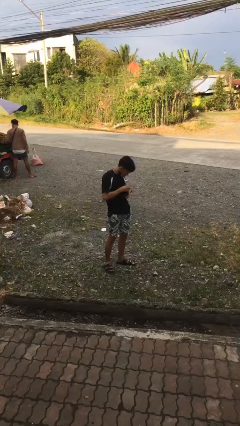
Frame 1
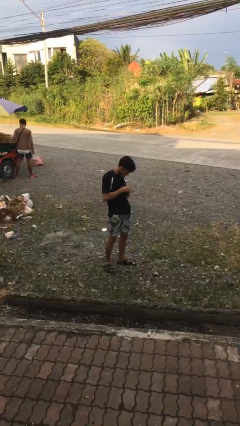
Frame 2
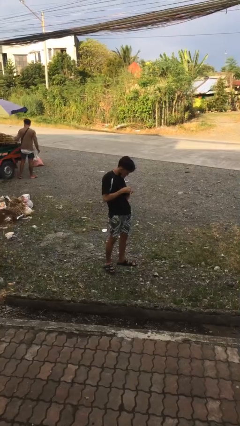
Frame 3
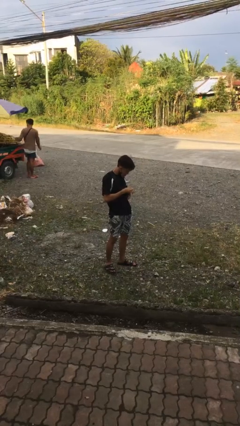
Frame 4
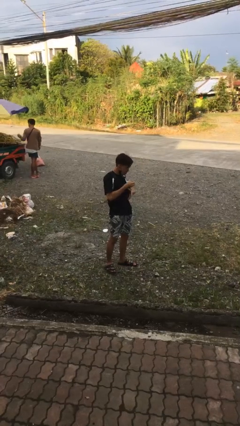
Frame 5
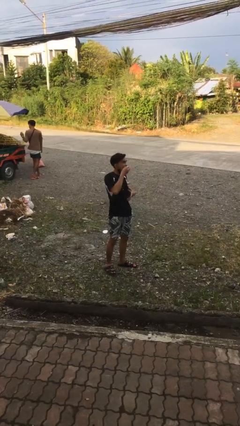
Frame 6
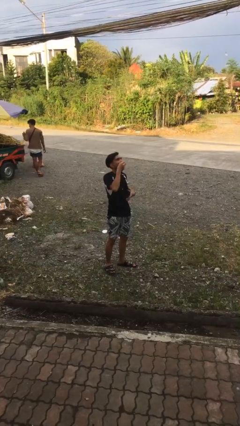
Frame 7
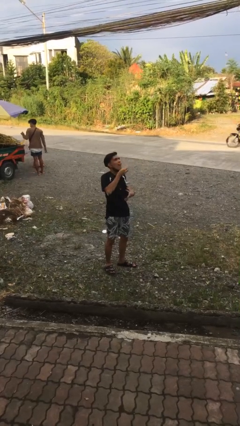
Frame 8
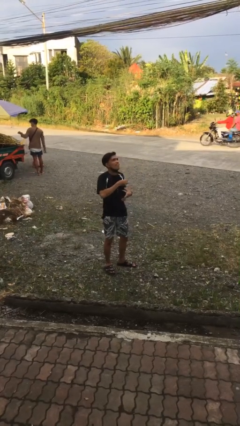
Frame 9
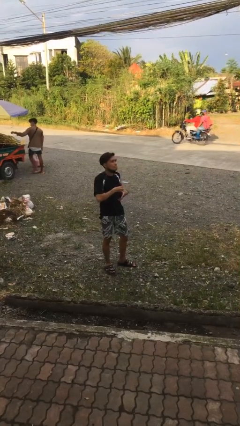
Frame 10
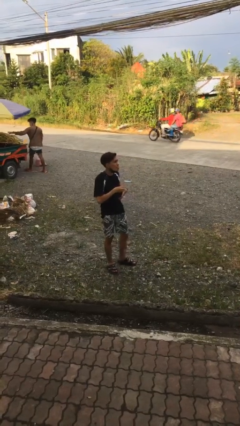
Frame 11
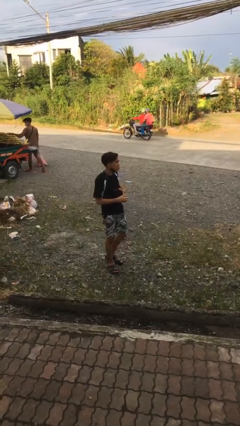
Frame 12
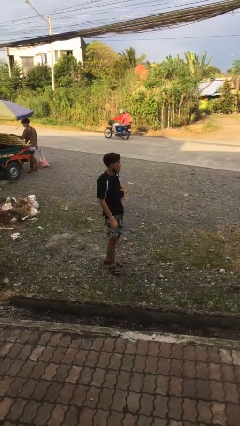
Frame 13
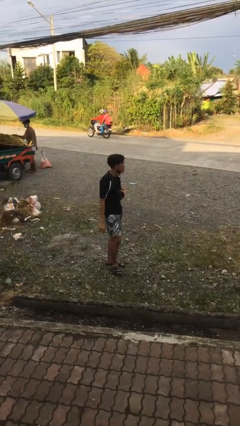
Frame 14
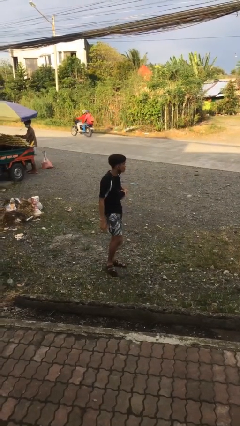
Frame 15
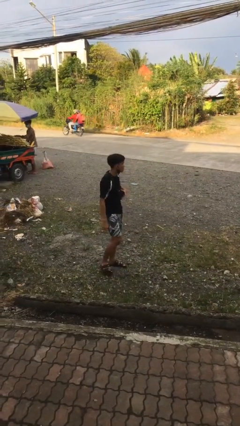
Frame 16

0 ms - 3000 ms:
person eats snack from bag

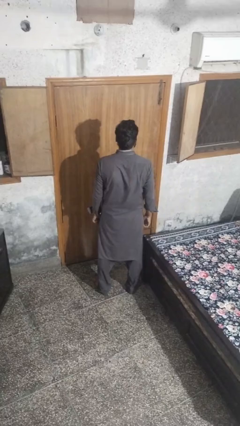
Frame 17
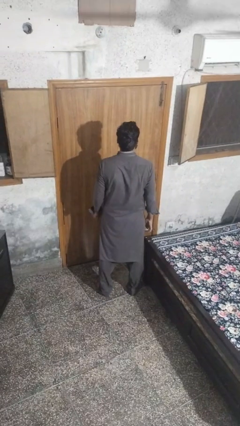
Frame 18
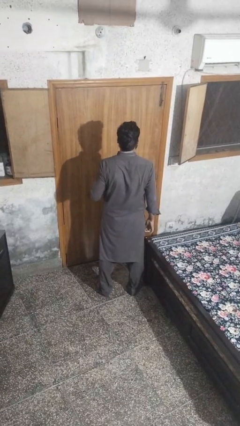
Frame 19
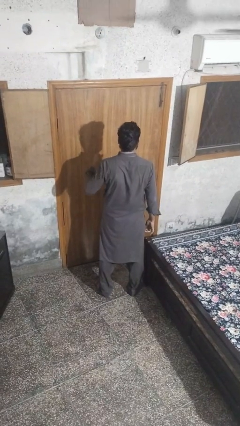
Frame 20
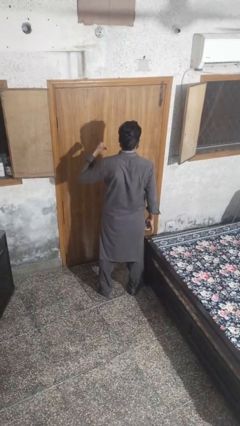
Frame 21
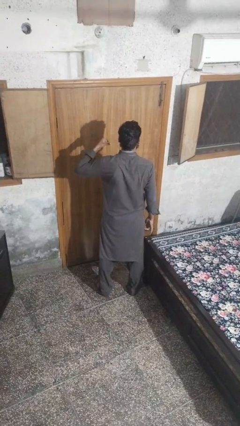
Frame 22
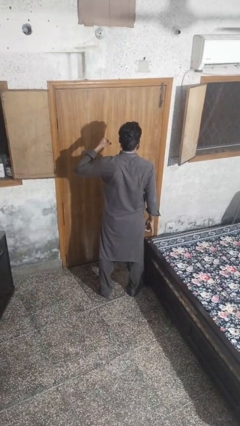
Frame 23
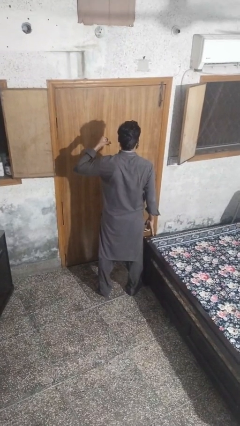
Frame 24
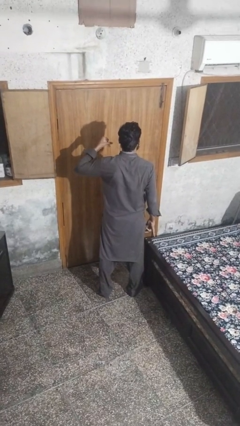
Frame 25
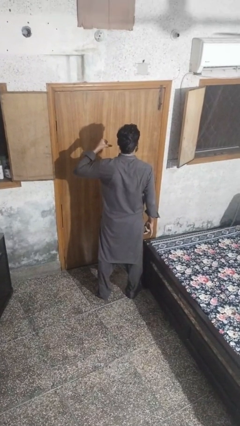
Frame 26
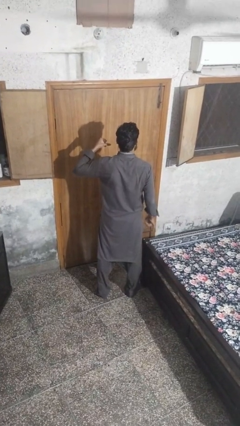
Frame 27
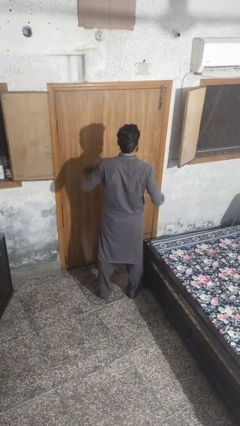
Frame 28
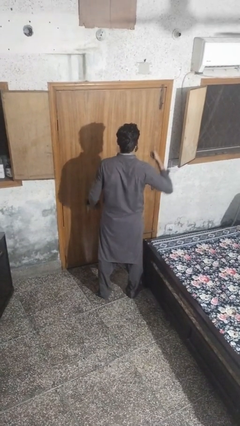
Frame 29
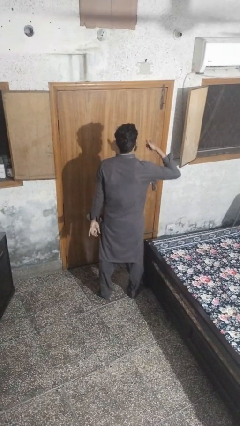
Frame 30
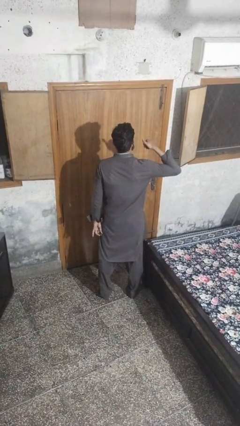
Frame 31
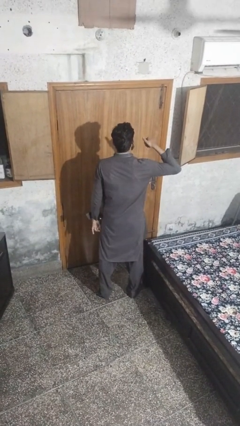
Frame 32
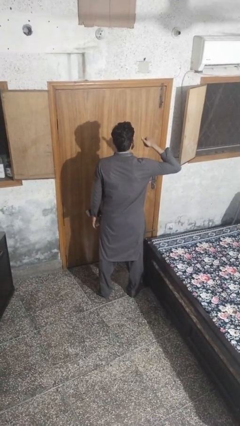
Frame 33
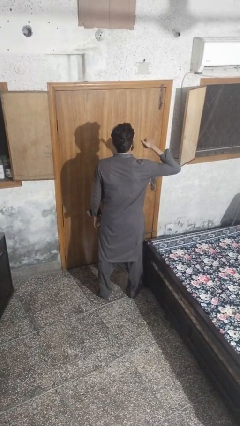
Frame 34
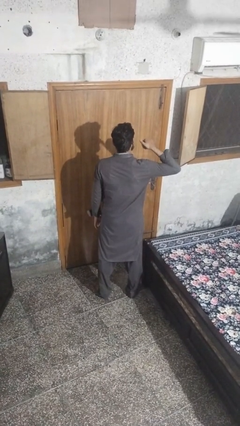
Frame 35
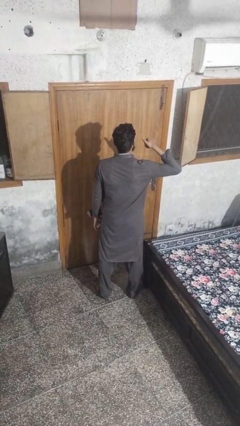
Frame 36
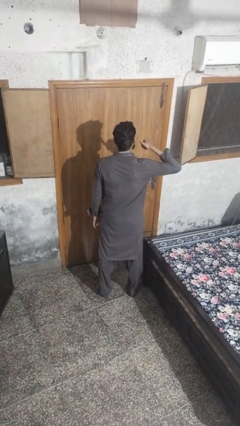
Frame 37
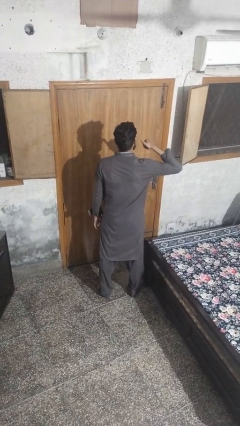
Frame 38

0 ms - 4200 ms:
person gestures call me

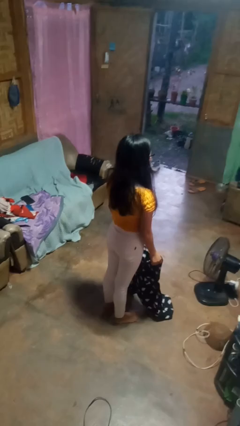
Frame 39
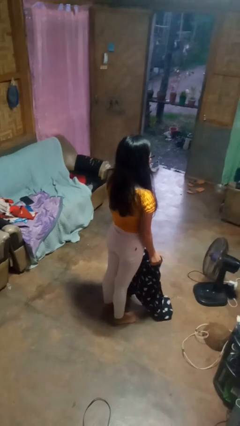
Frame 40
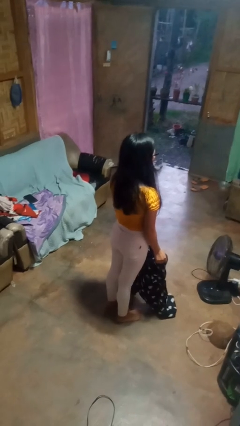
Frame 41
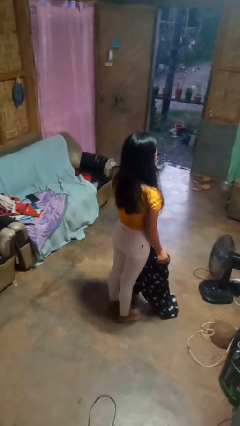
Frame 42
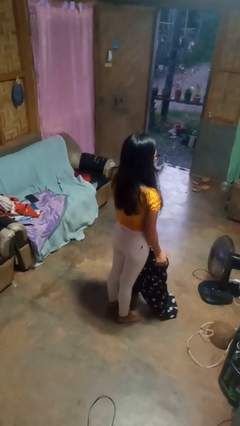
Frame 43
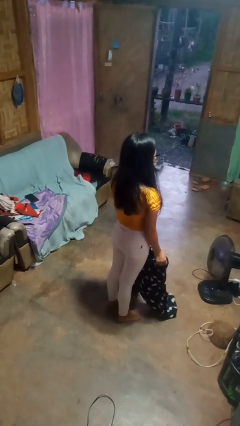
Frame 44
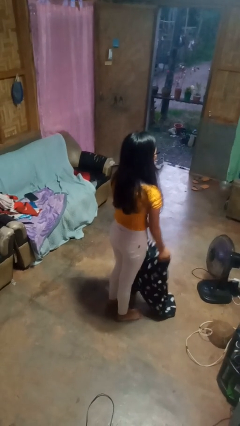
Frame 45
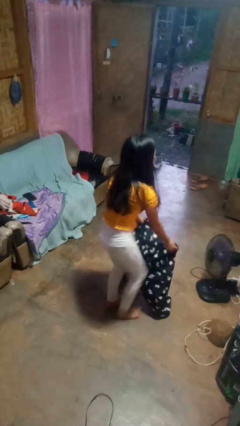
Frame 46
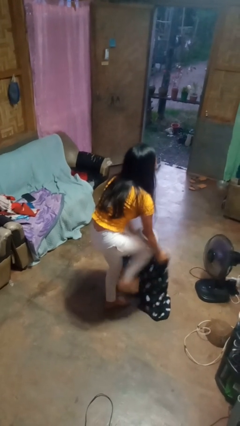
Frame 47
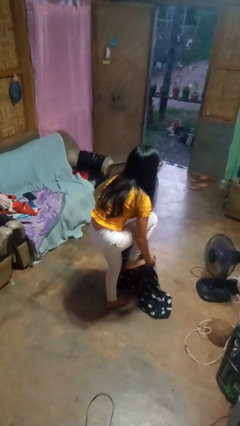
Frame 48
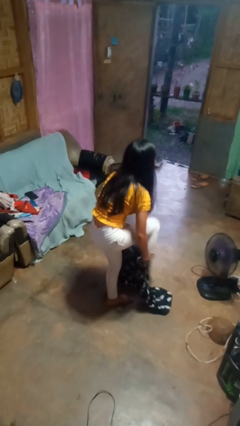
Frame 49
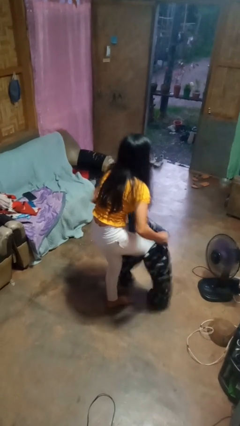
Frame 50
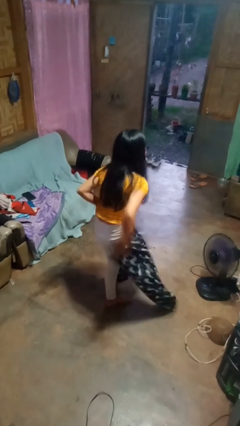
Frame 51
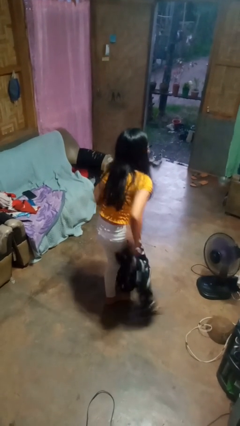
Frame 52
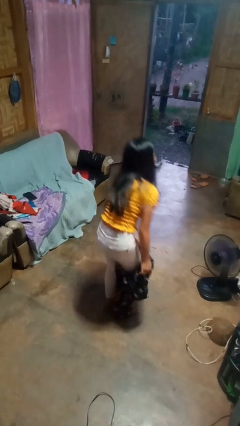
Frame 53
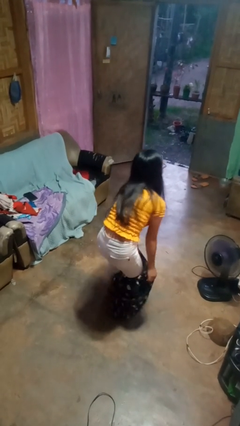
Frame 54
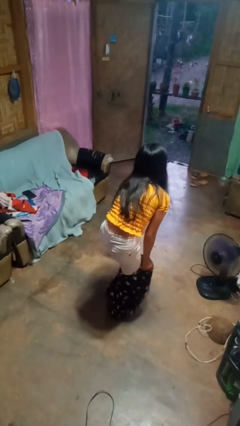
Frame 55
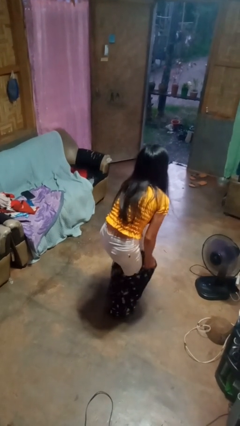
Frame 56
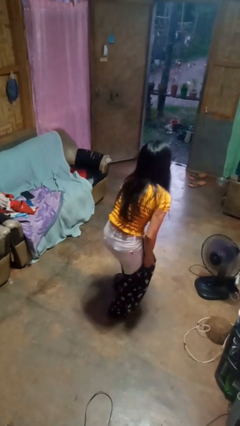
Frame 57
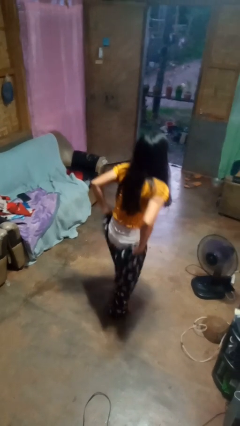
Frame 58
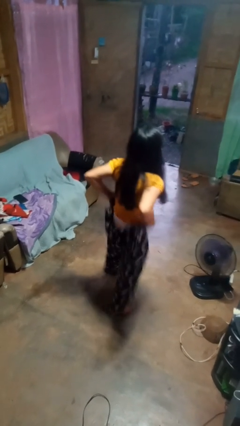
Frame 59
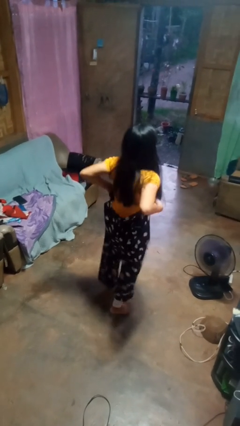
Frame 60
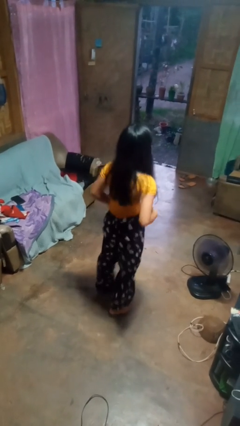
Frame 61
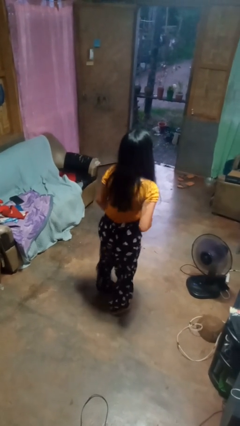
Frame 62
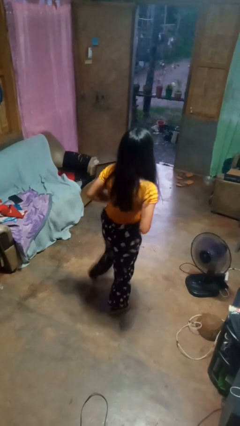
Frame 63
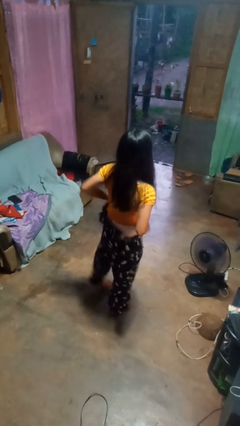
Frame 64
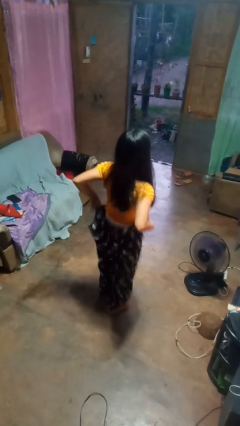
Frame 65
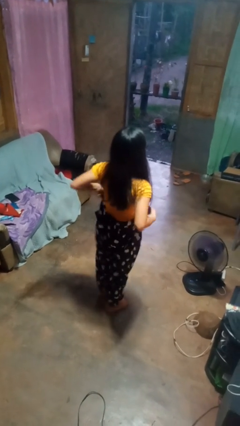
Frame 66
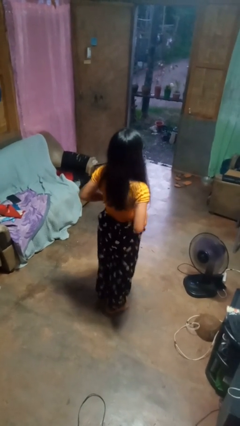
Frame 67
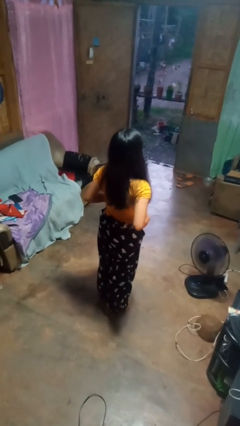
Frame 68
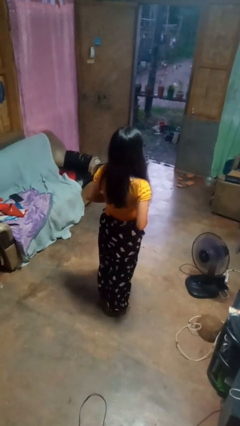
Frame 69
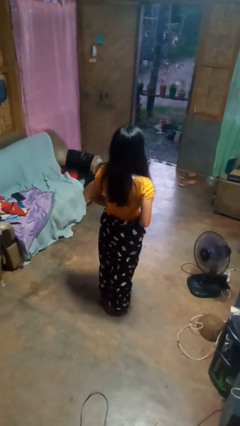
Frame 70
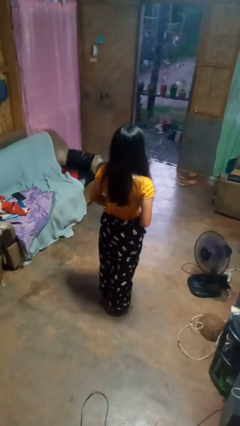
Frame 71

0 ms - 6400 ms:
person puts on pants

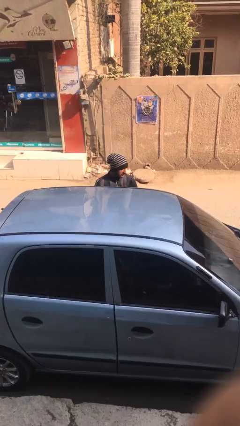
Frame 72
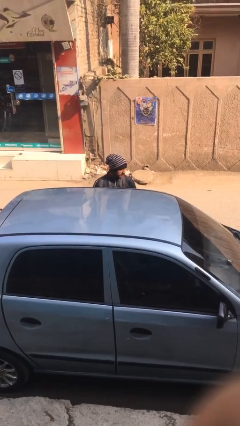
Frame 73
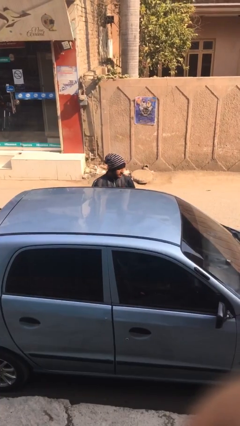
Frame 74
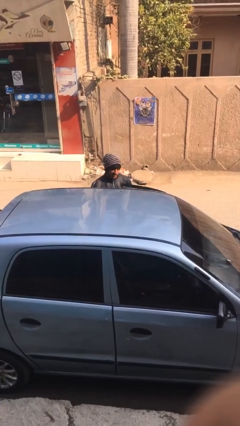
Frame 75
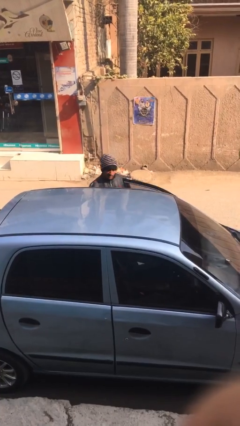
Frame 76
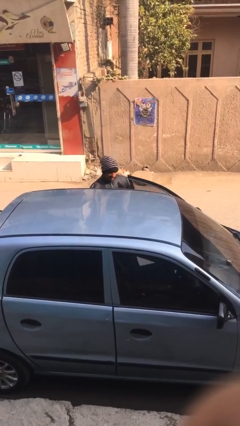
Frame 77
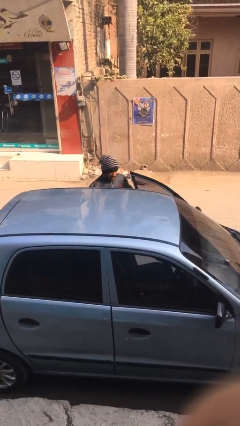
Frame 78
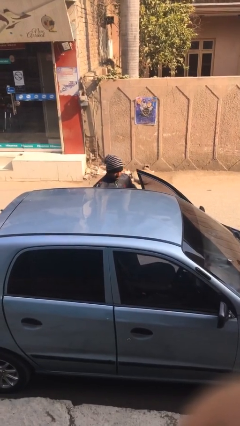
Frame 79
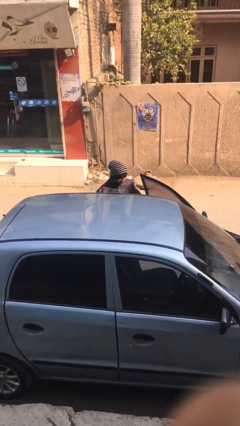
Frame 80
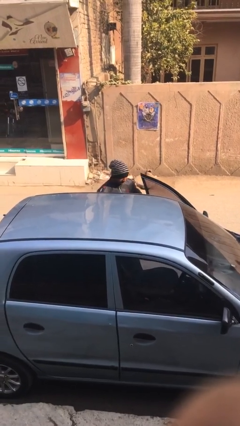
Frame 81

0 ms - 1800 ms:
person opens car door

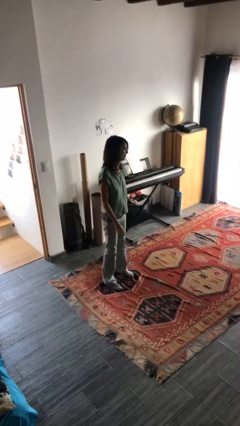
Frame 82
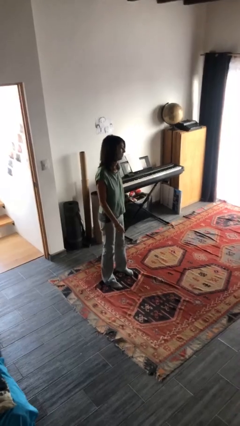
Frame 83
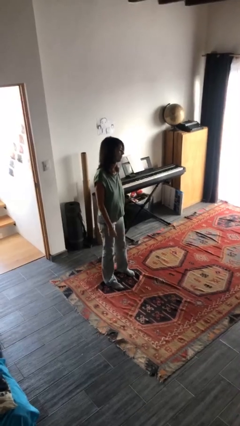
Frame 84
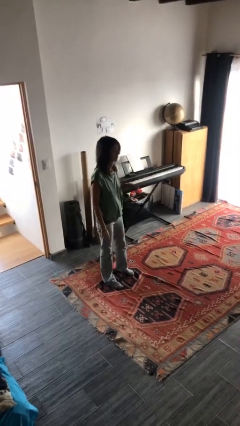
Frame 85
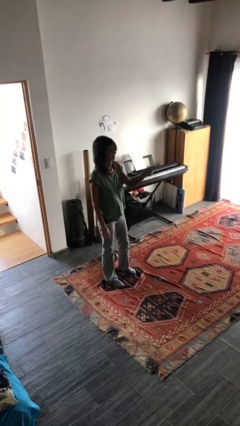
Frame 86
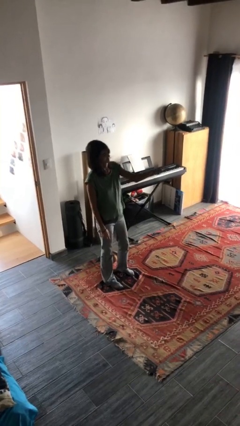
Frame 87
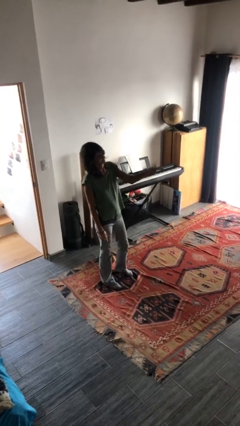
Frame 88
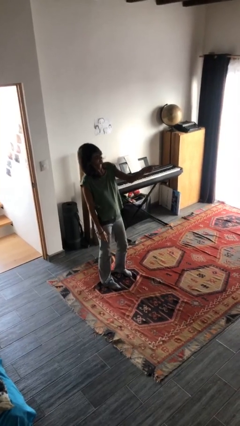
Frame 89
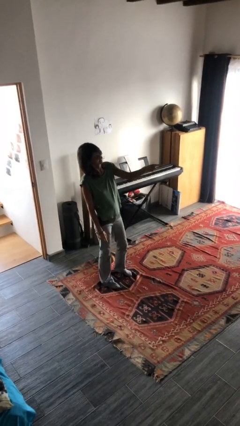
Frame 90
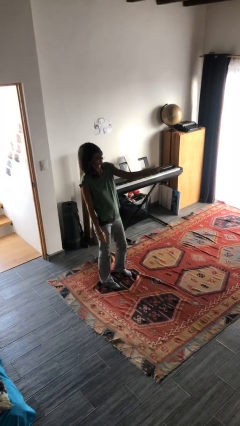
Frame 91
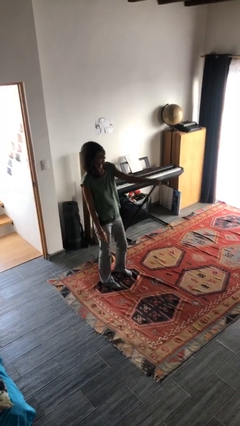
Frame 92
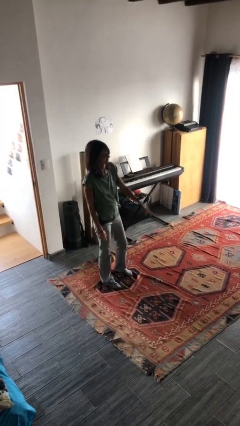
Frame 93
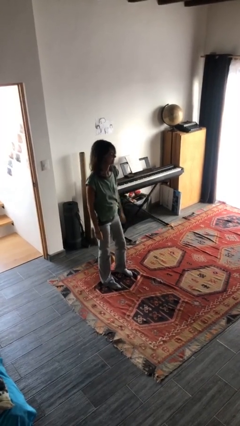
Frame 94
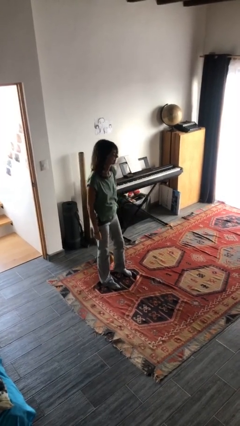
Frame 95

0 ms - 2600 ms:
person points at person

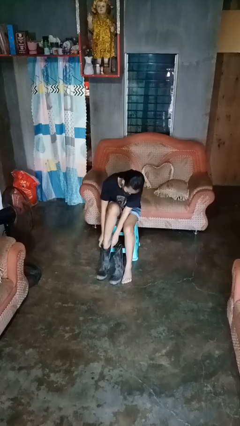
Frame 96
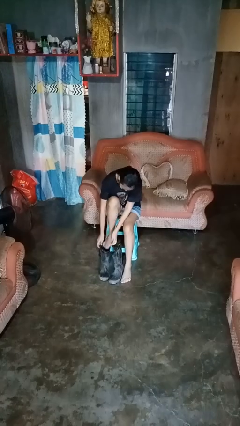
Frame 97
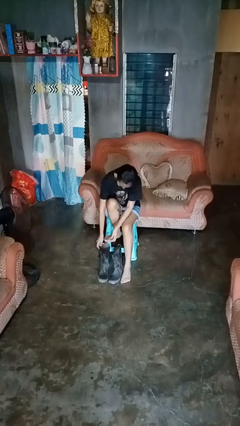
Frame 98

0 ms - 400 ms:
person takes off boots
